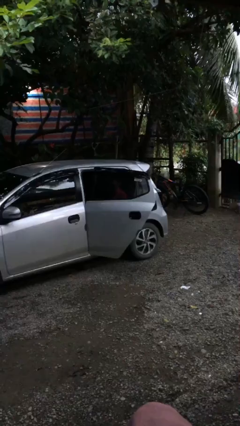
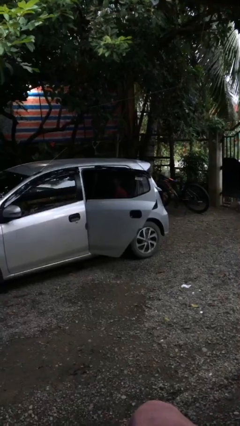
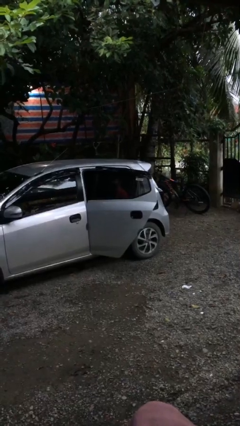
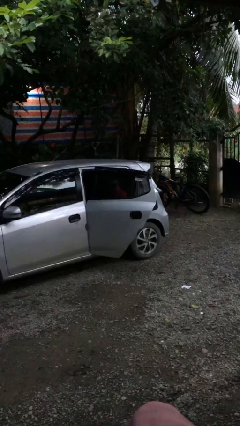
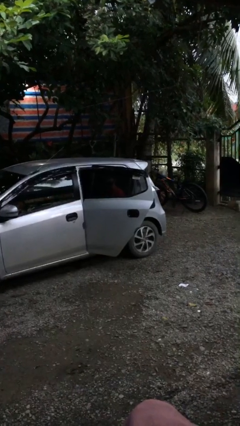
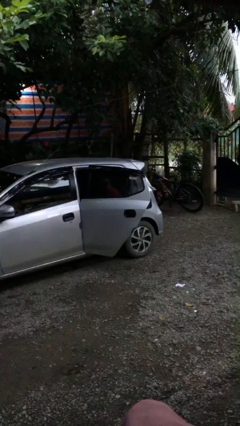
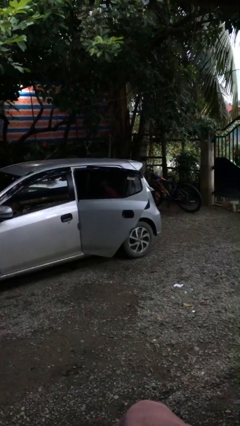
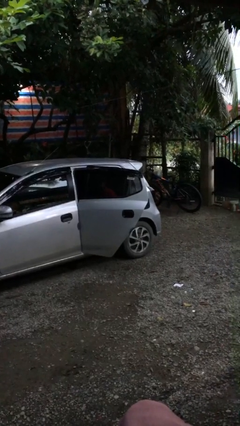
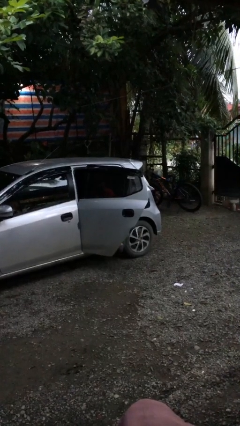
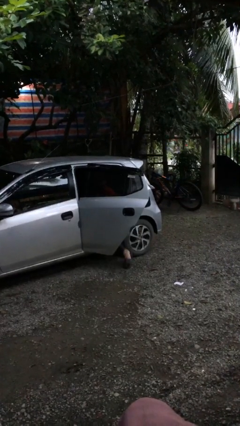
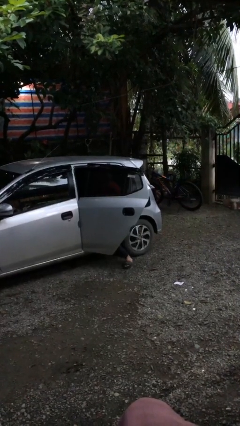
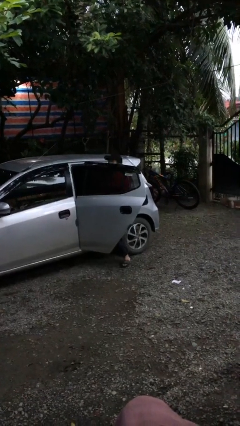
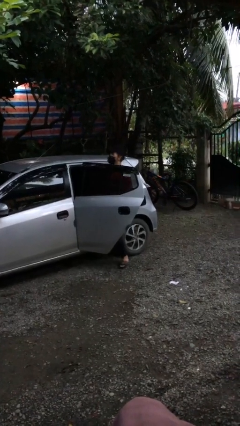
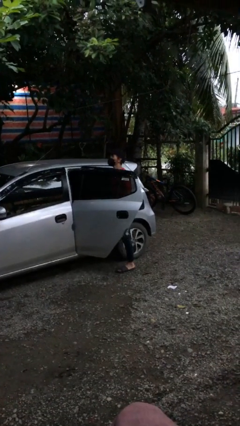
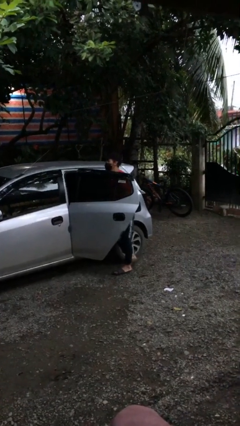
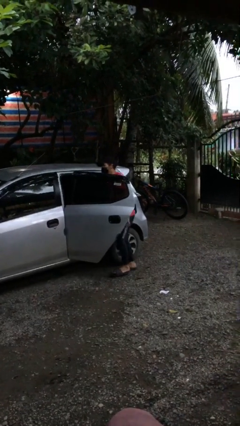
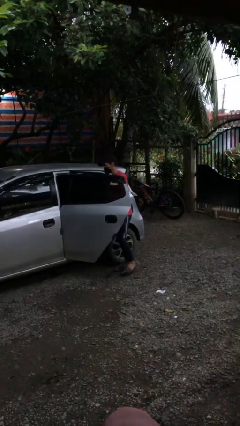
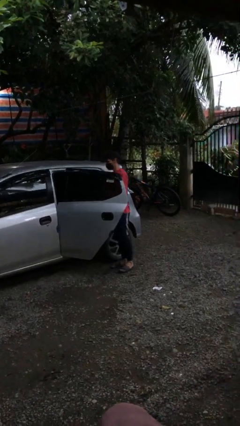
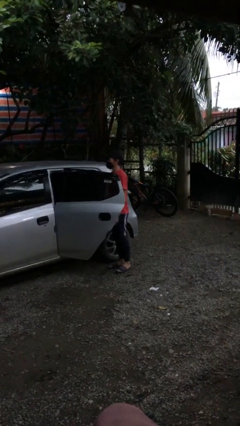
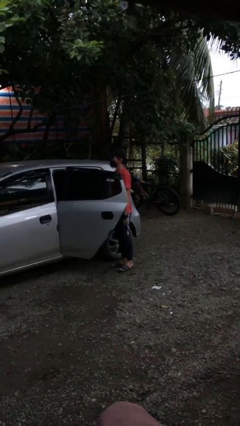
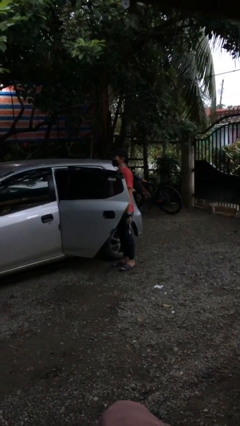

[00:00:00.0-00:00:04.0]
person exits car

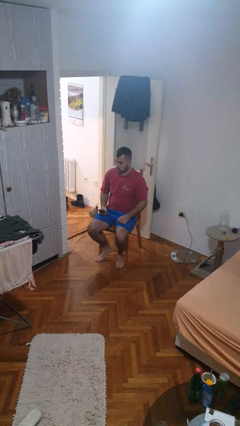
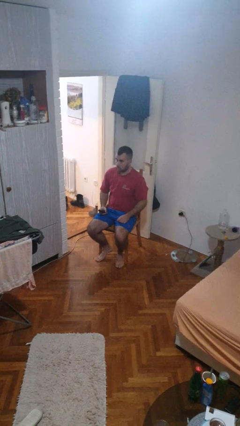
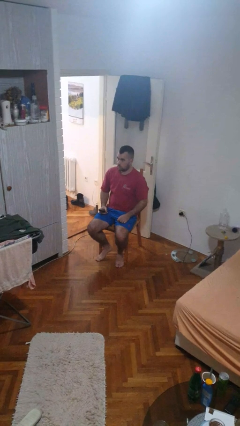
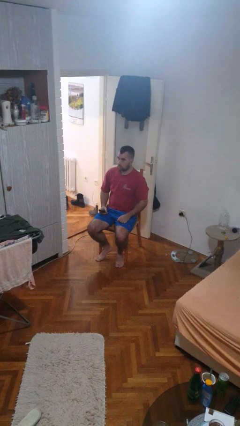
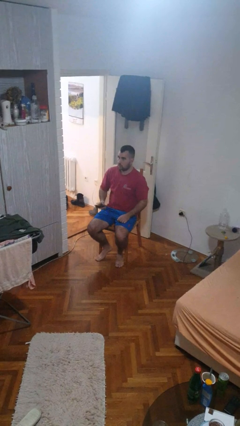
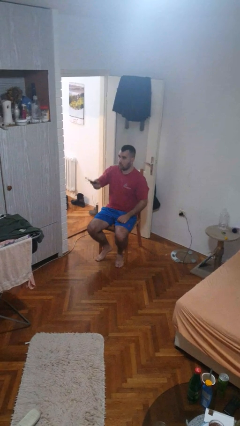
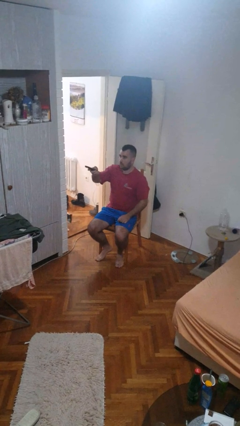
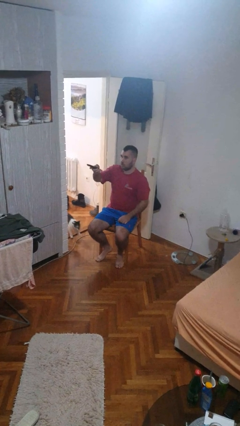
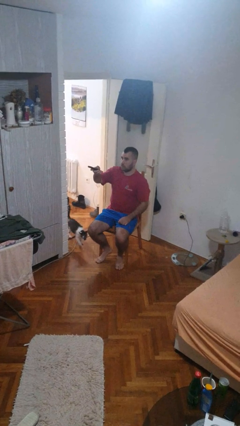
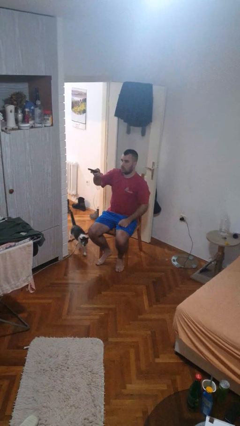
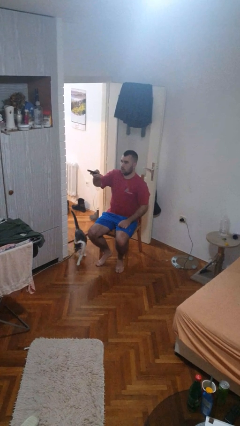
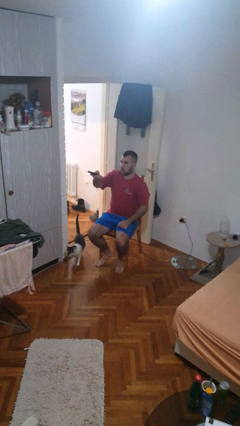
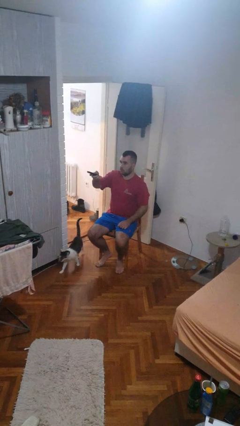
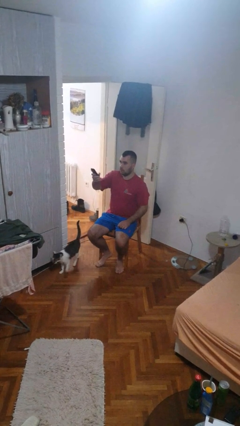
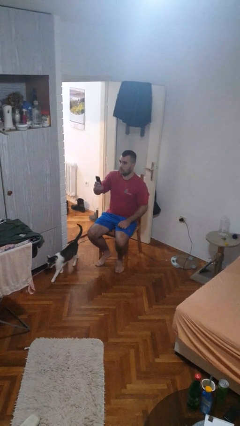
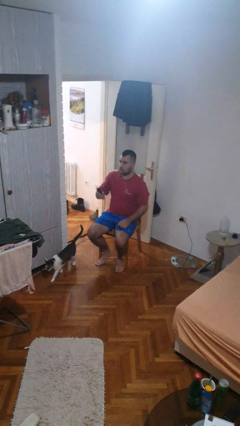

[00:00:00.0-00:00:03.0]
person uses television remote

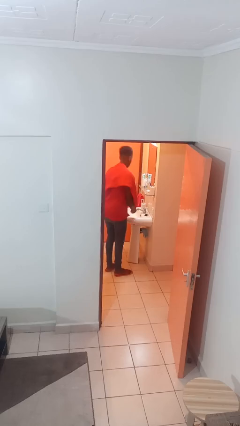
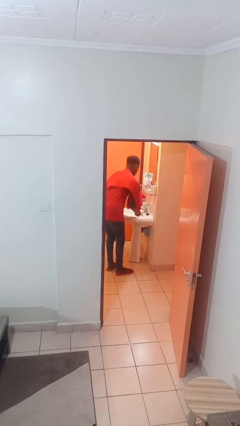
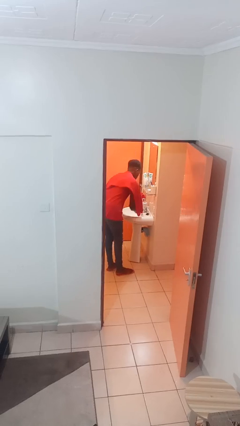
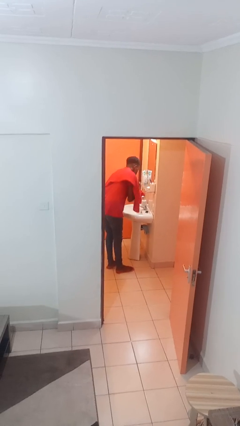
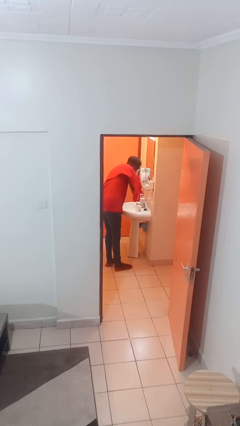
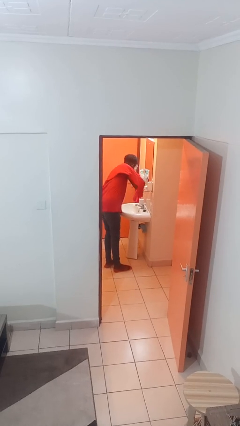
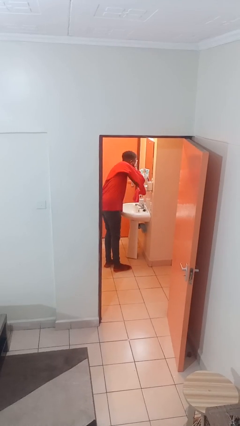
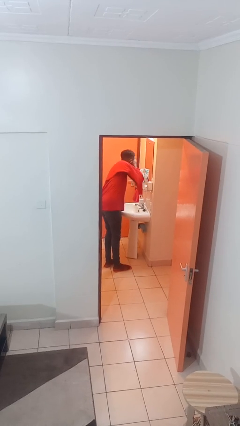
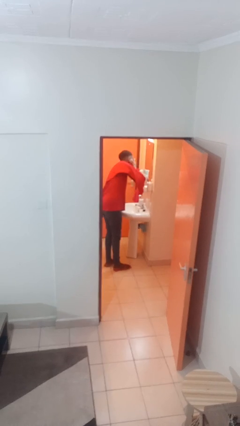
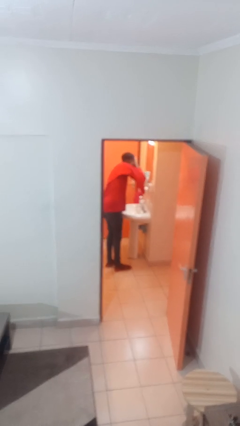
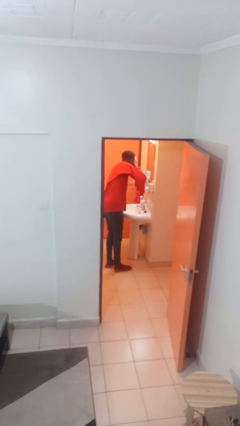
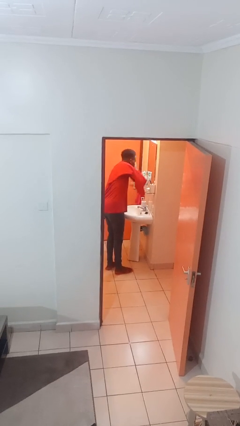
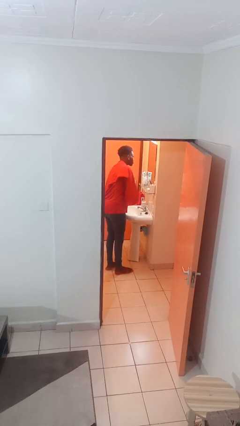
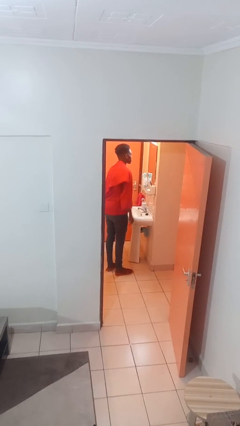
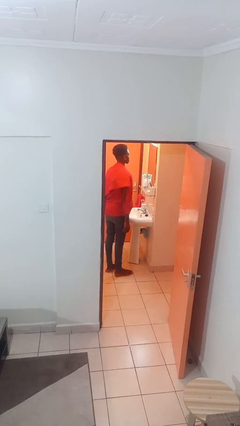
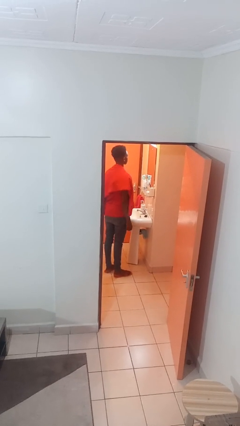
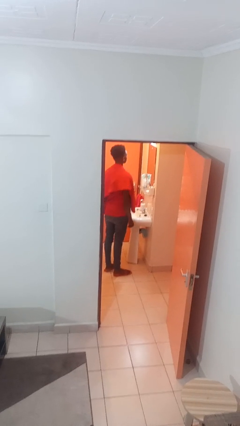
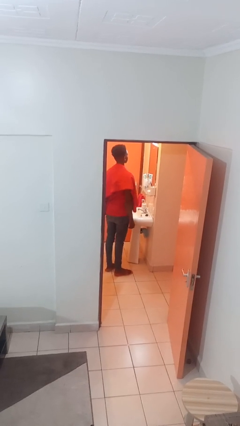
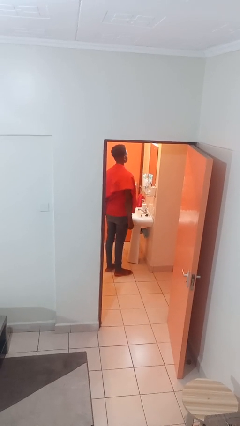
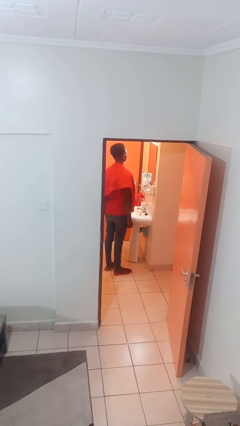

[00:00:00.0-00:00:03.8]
person washes face

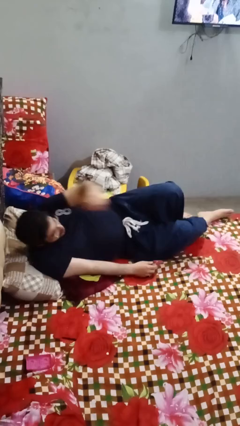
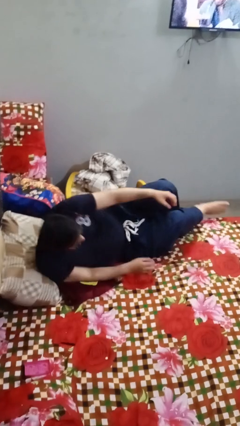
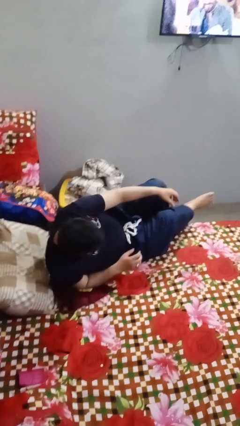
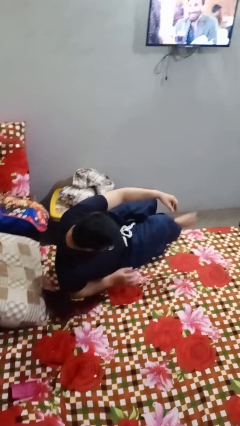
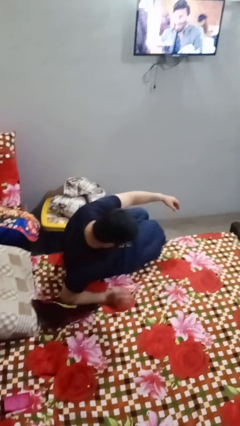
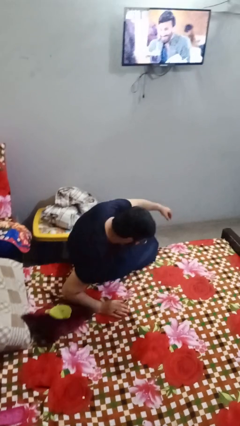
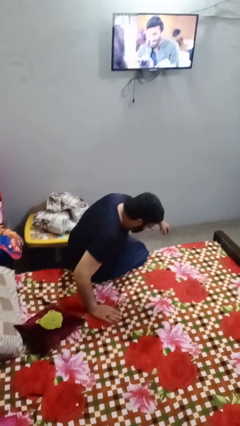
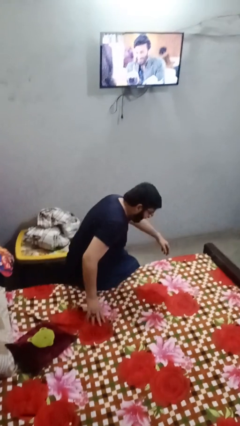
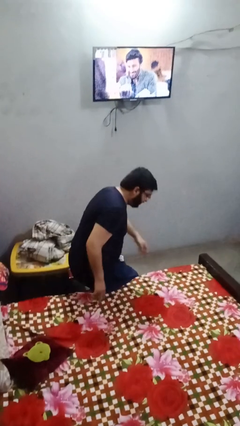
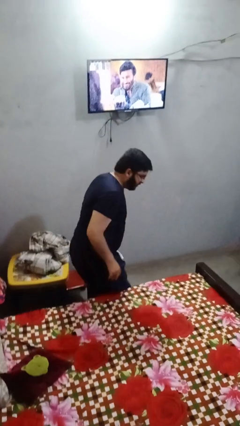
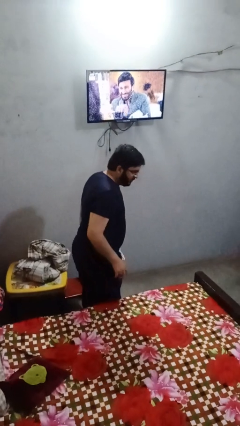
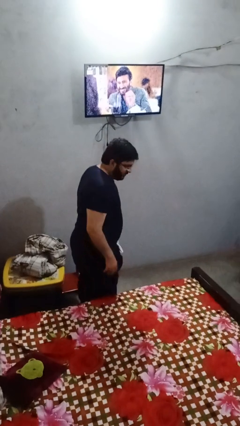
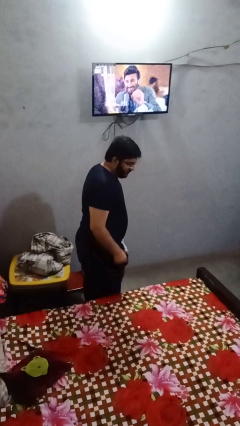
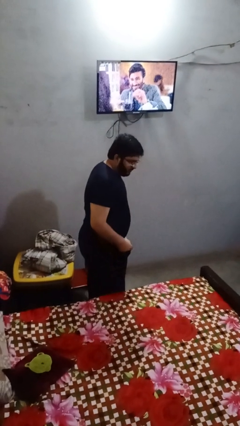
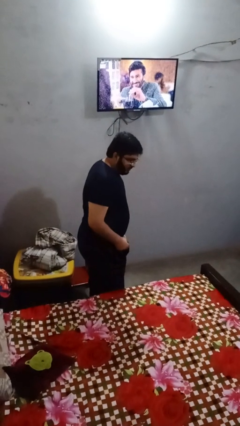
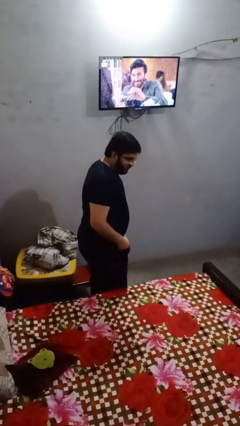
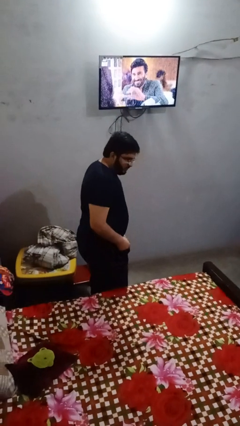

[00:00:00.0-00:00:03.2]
person stands up

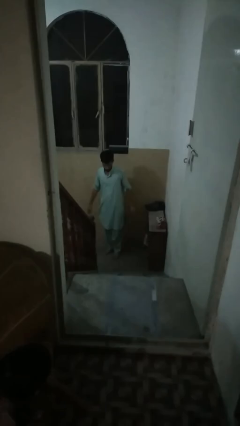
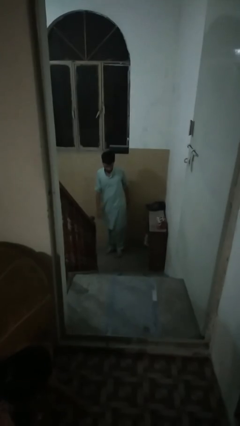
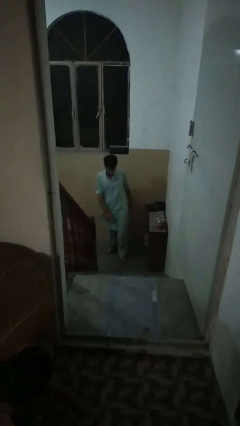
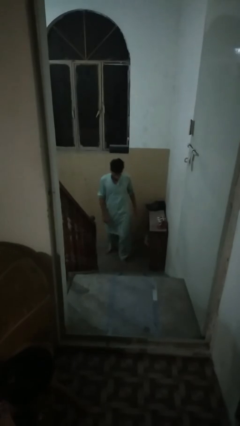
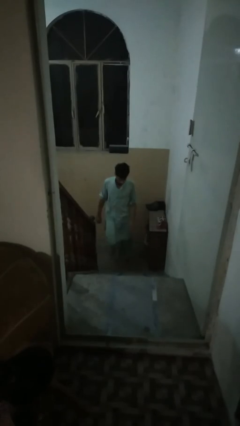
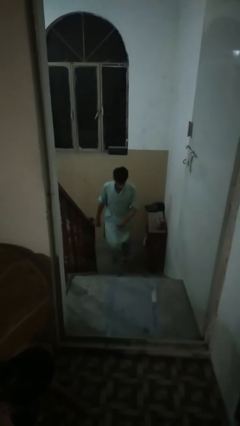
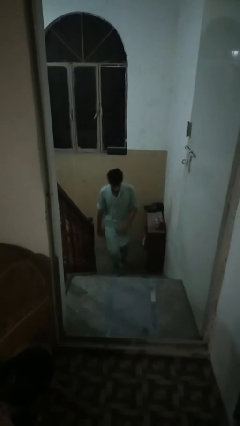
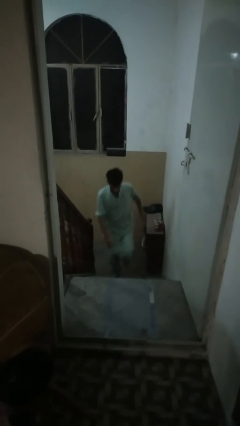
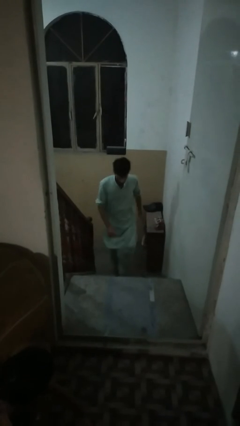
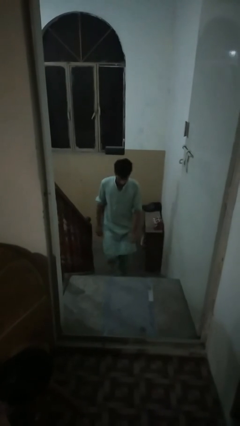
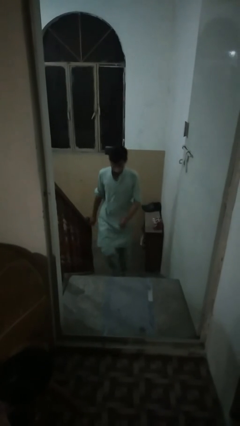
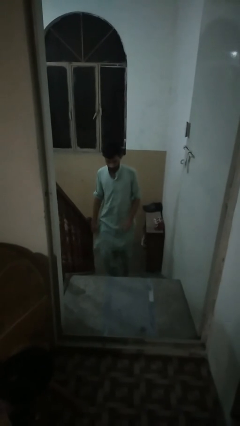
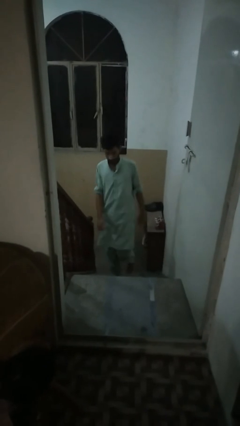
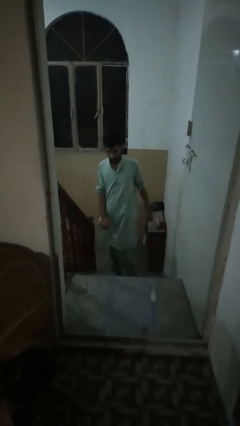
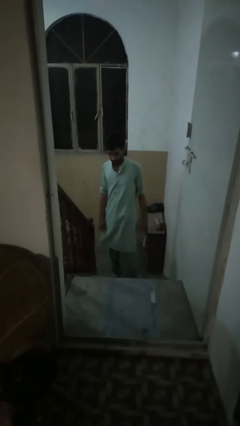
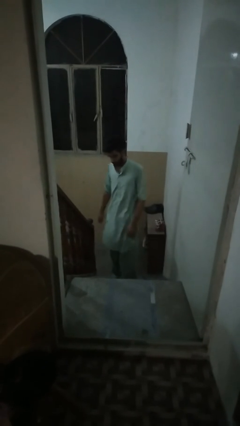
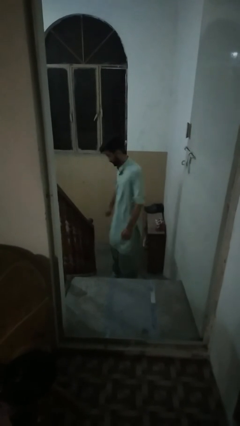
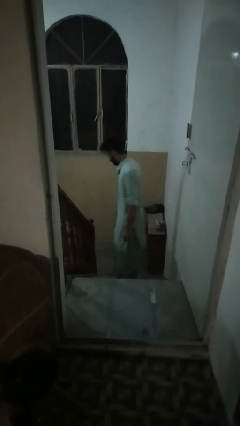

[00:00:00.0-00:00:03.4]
person climbs up stairs

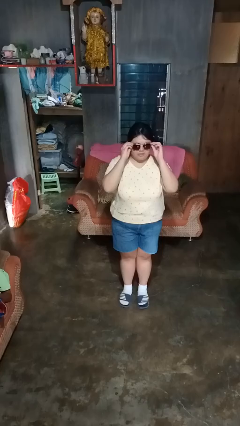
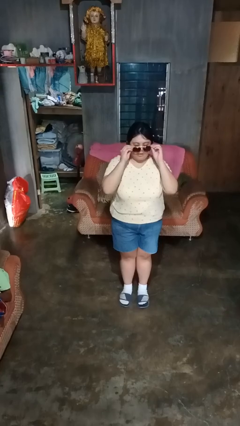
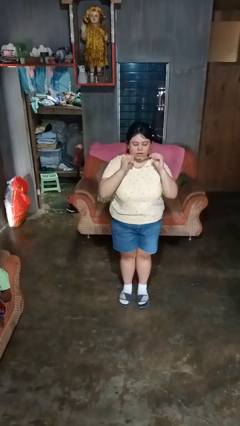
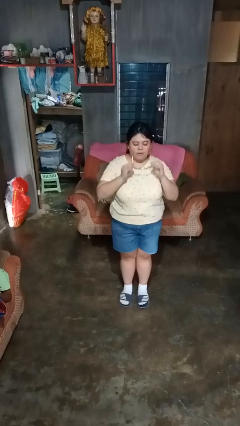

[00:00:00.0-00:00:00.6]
person takes off sunglasses
